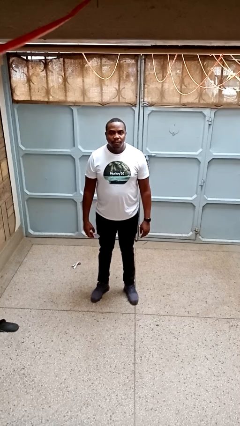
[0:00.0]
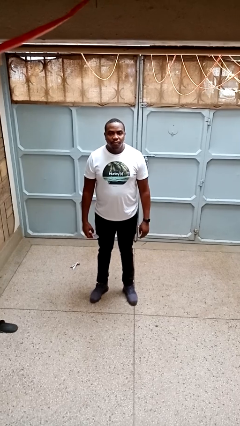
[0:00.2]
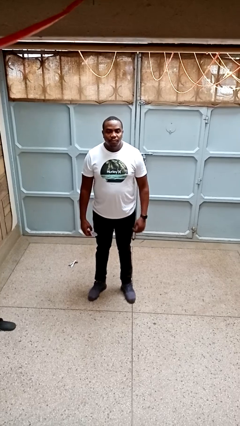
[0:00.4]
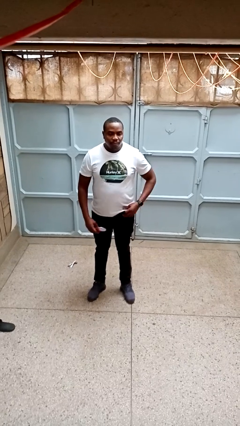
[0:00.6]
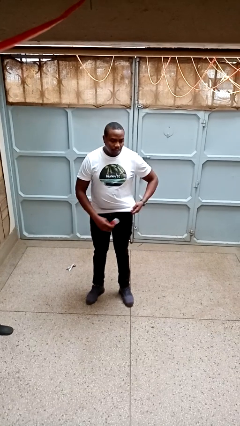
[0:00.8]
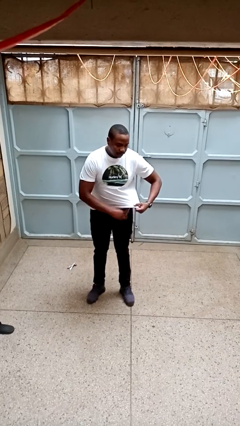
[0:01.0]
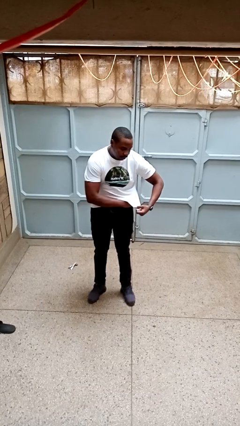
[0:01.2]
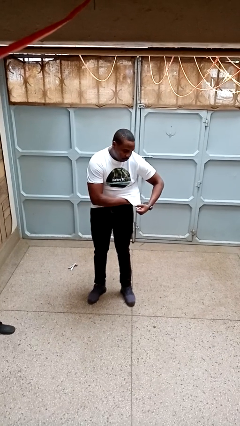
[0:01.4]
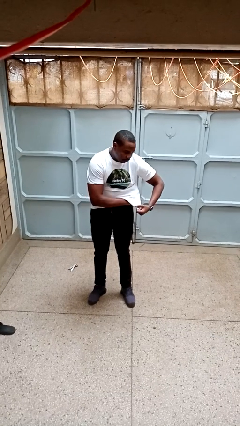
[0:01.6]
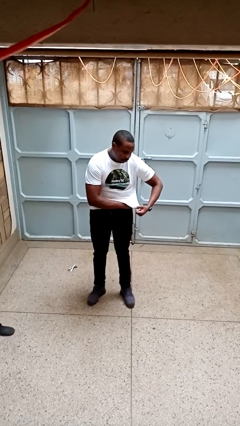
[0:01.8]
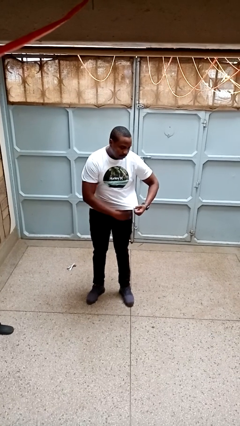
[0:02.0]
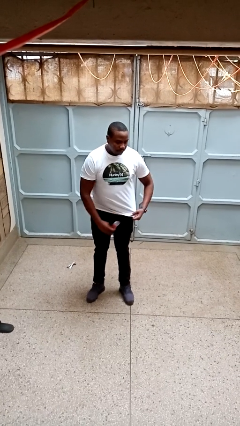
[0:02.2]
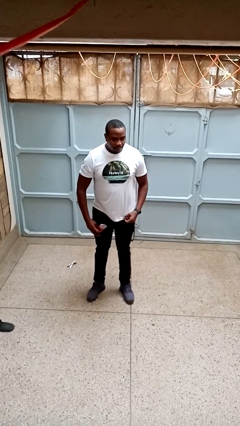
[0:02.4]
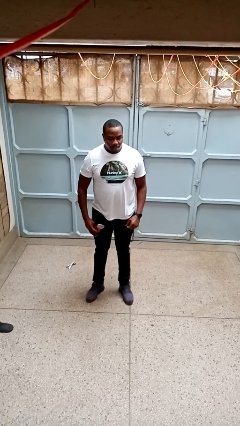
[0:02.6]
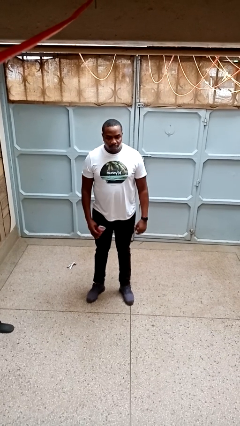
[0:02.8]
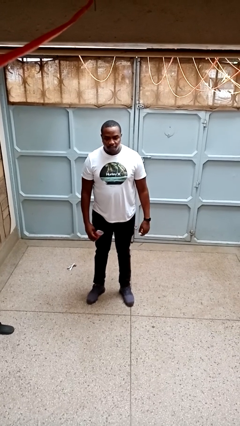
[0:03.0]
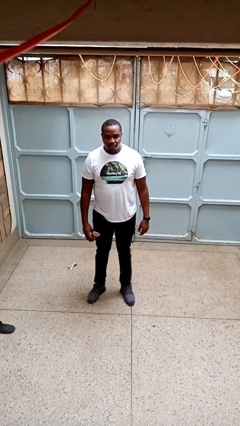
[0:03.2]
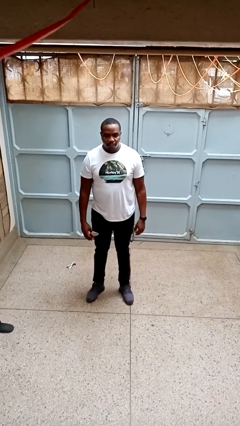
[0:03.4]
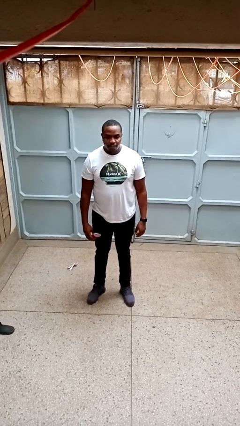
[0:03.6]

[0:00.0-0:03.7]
person applies deodorant

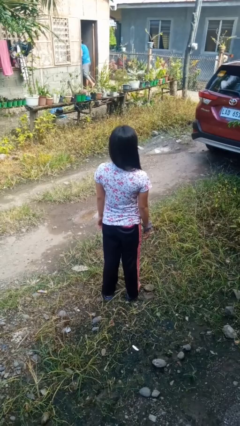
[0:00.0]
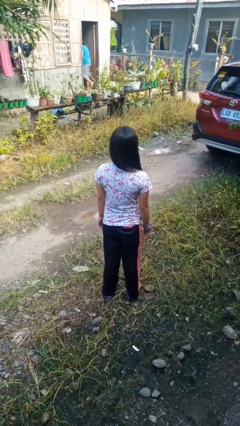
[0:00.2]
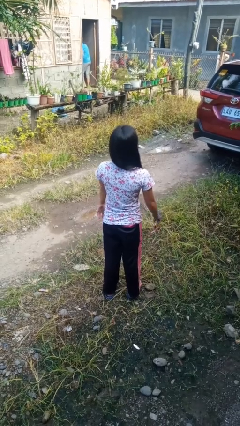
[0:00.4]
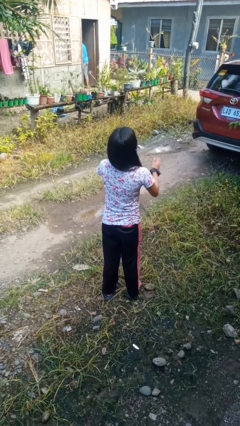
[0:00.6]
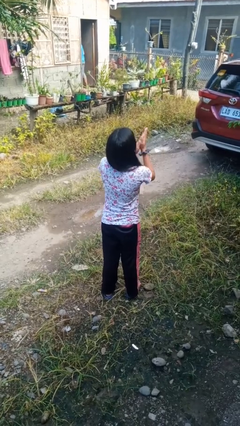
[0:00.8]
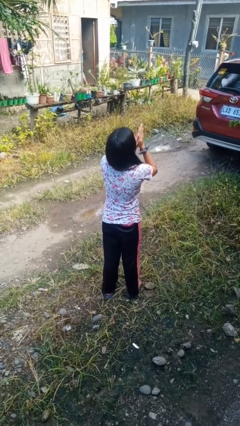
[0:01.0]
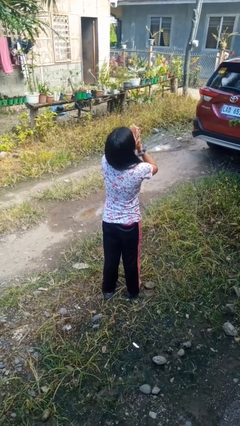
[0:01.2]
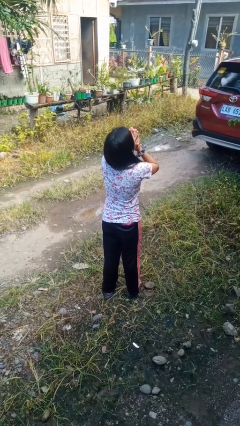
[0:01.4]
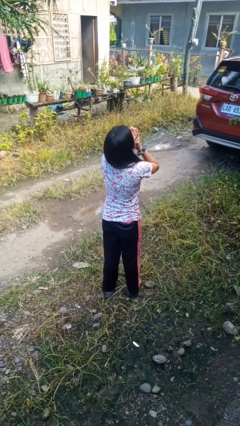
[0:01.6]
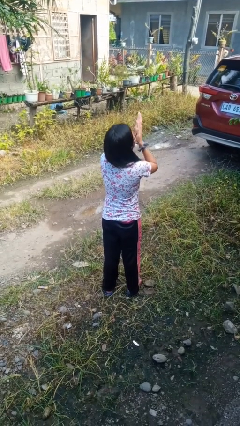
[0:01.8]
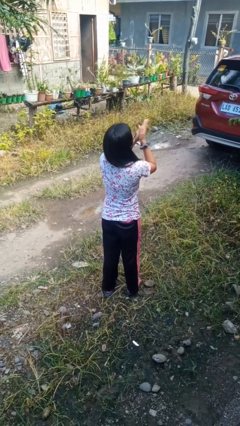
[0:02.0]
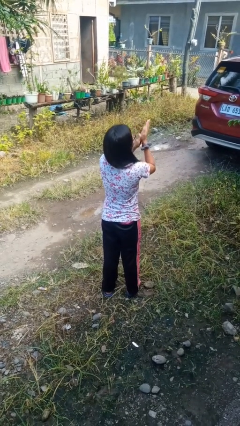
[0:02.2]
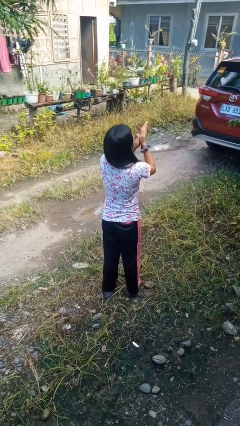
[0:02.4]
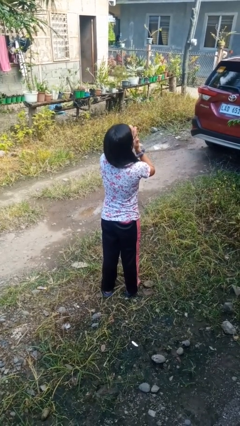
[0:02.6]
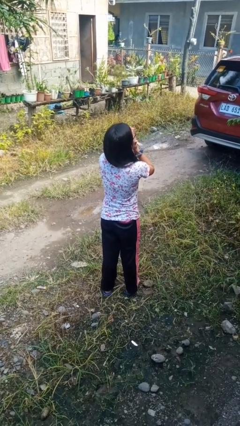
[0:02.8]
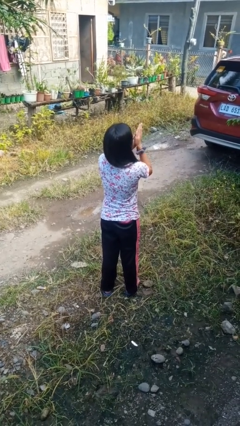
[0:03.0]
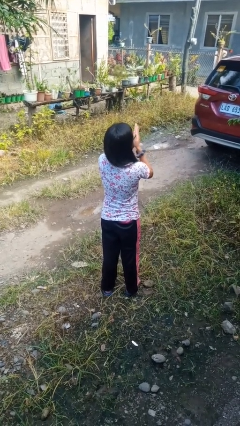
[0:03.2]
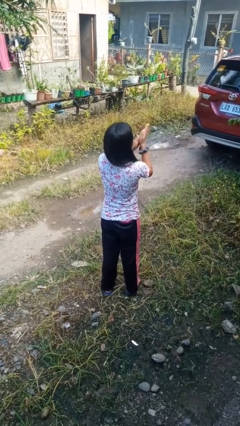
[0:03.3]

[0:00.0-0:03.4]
person blows into hands

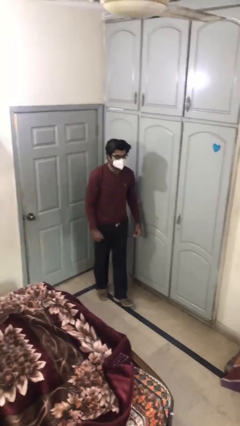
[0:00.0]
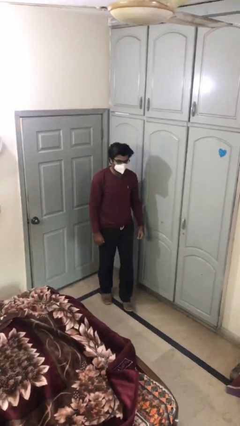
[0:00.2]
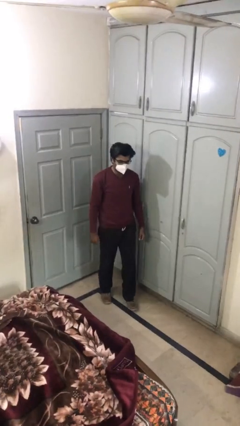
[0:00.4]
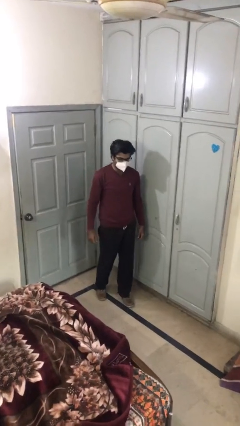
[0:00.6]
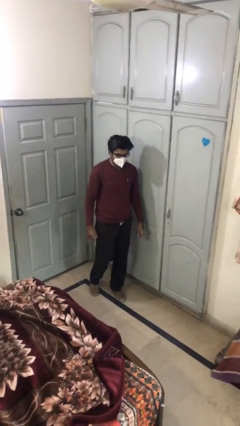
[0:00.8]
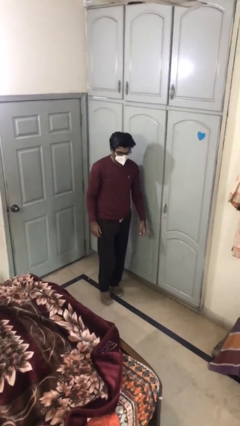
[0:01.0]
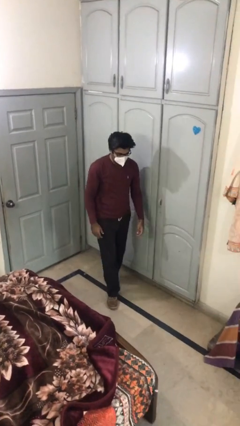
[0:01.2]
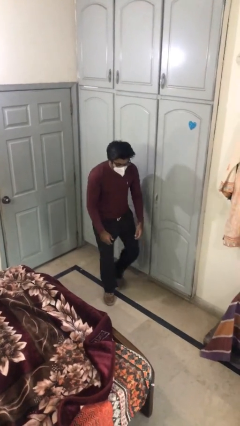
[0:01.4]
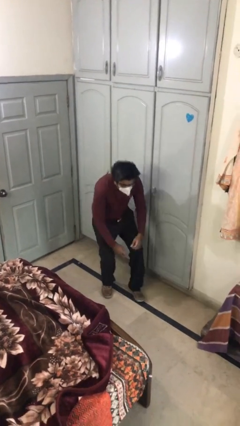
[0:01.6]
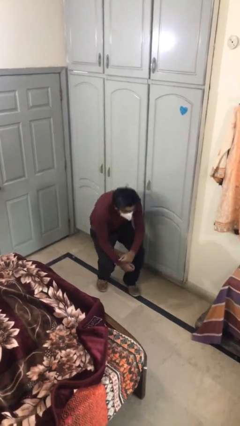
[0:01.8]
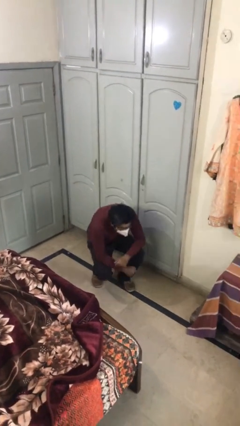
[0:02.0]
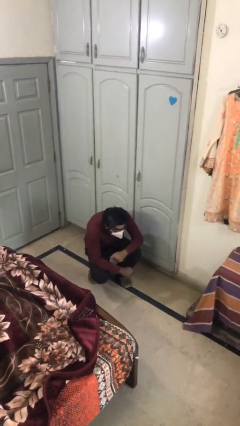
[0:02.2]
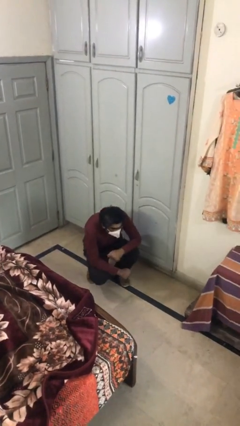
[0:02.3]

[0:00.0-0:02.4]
person sits down

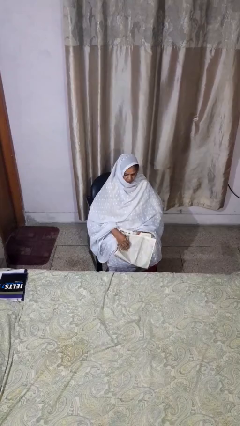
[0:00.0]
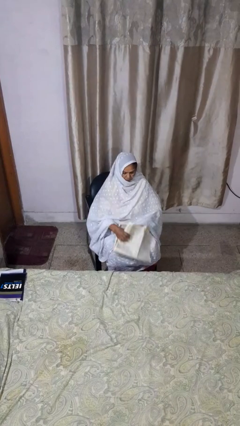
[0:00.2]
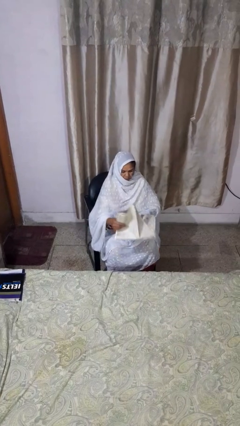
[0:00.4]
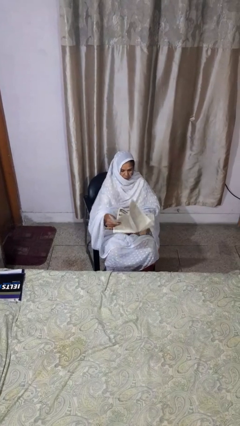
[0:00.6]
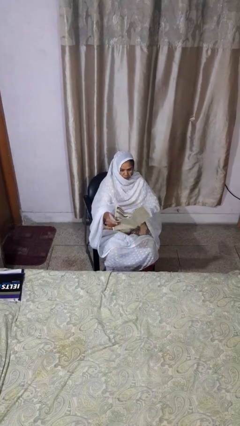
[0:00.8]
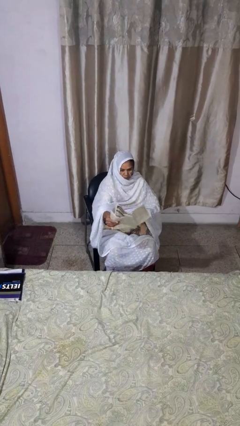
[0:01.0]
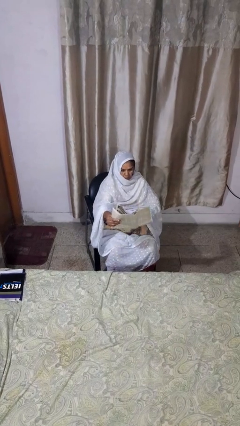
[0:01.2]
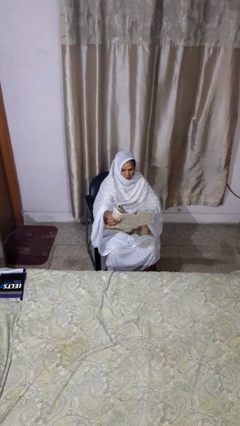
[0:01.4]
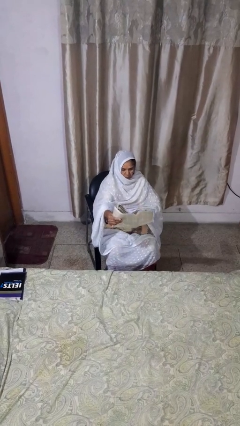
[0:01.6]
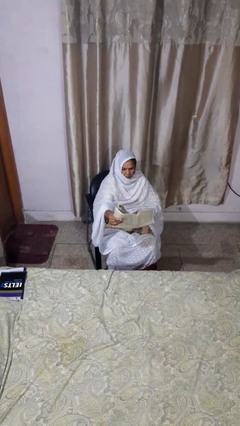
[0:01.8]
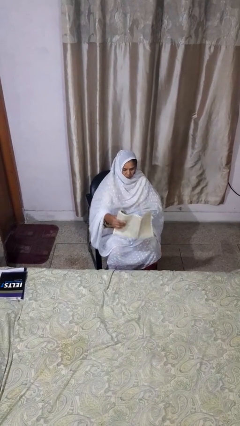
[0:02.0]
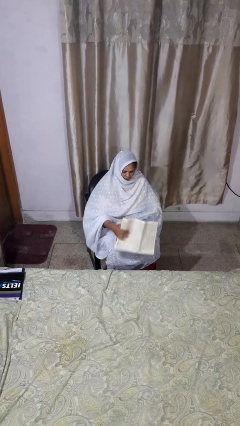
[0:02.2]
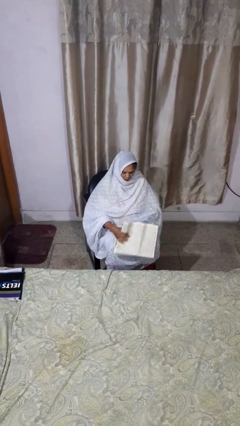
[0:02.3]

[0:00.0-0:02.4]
person reads newspaper

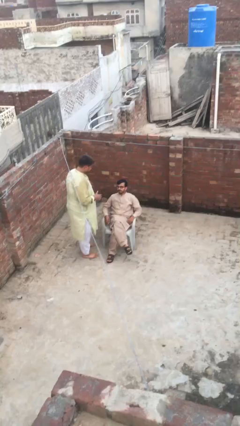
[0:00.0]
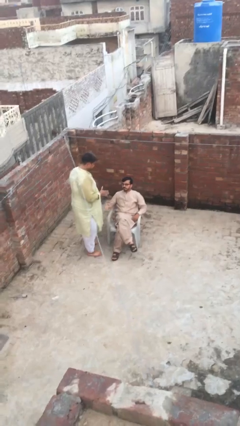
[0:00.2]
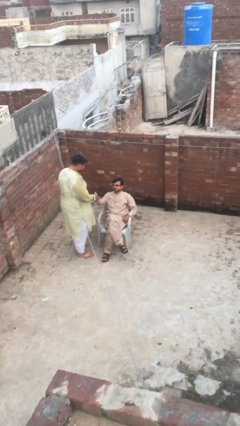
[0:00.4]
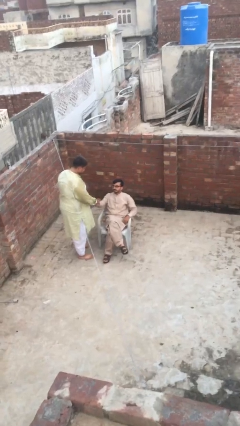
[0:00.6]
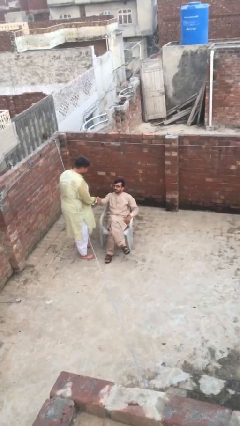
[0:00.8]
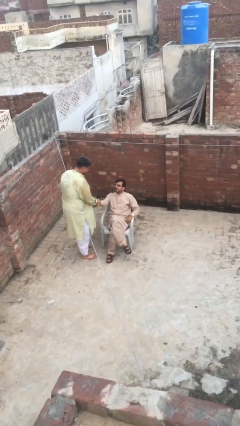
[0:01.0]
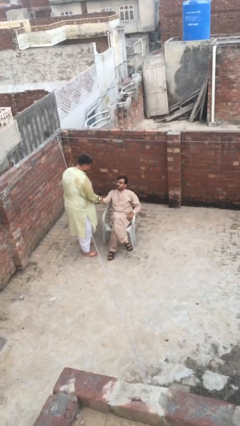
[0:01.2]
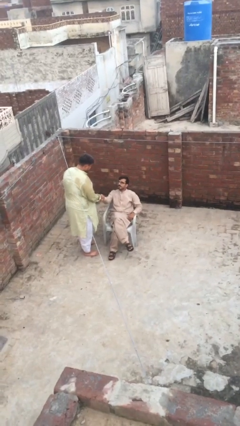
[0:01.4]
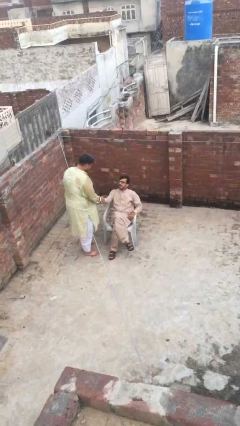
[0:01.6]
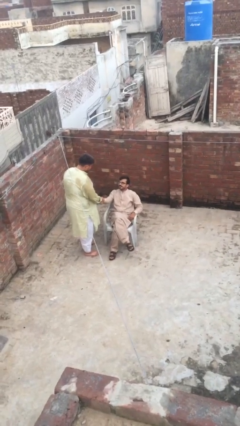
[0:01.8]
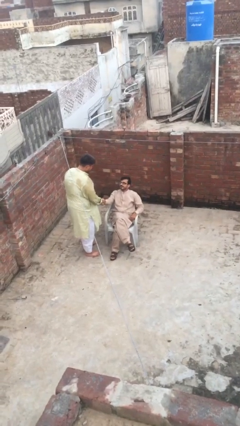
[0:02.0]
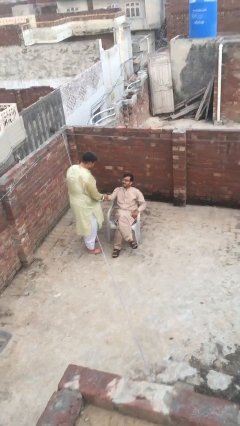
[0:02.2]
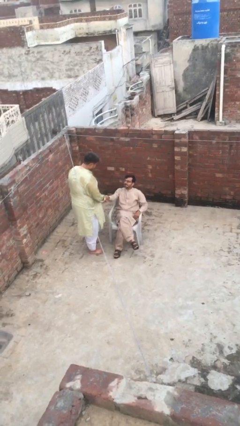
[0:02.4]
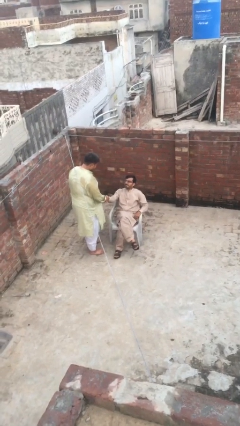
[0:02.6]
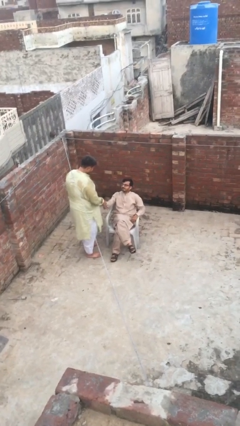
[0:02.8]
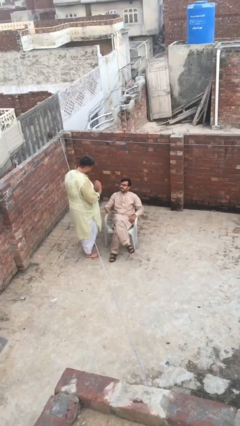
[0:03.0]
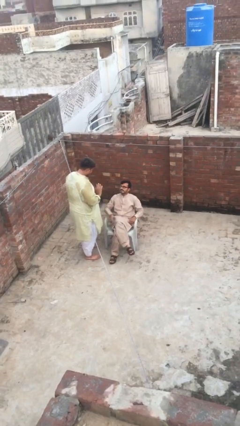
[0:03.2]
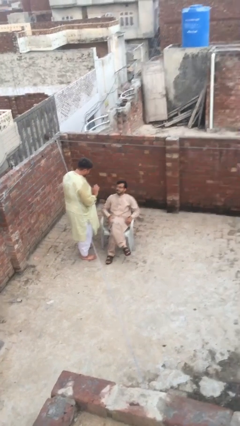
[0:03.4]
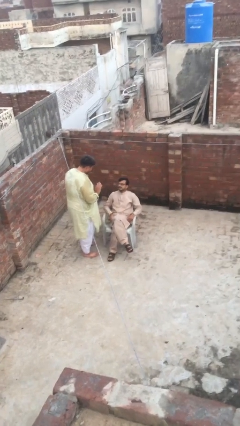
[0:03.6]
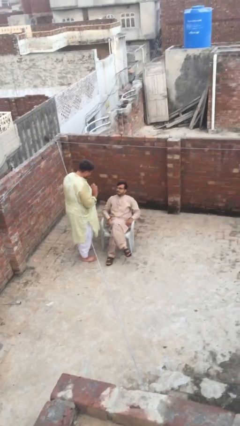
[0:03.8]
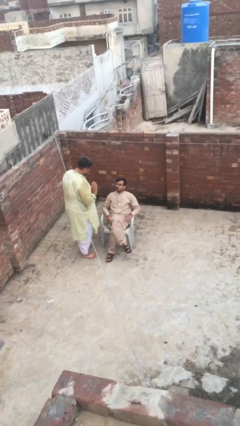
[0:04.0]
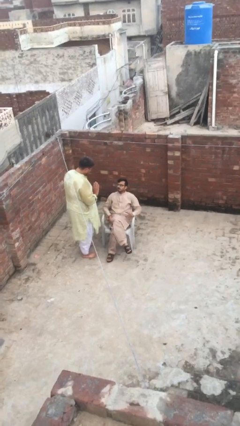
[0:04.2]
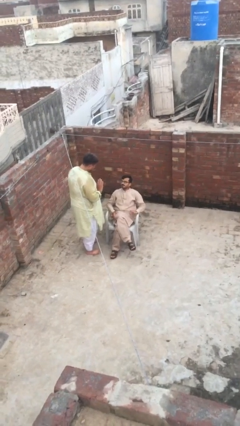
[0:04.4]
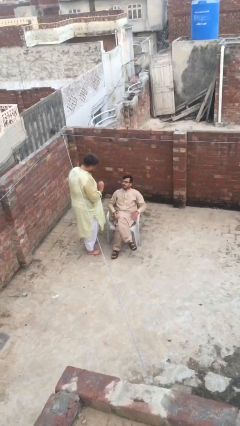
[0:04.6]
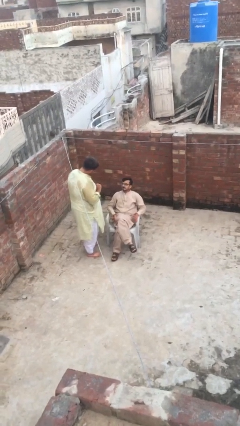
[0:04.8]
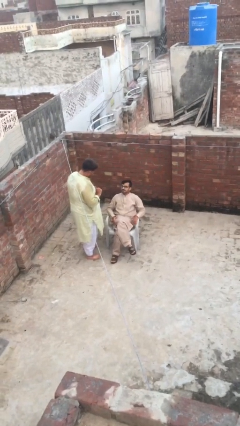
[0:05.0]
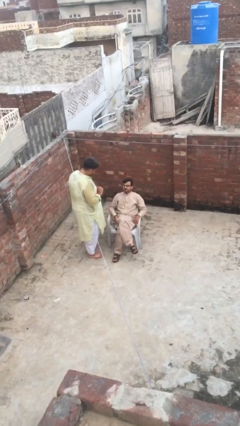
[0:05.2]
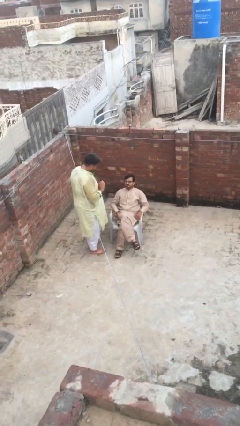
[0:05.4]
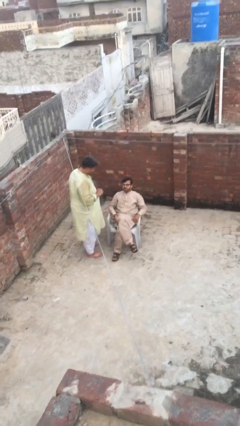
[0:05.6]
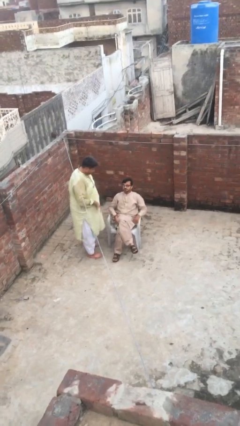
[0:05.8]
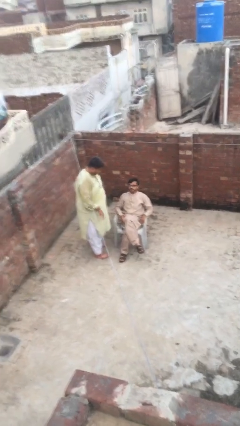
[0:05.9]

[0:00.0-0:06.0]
person shakes hand
